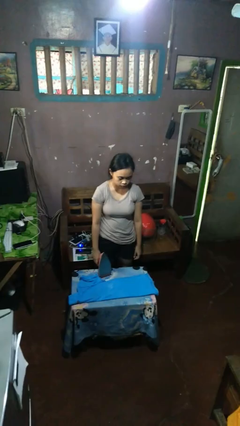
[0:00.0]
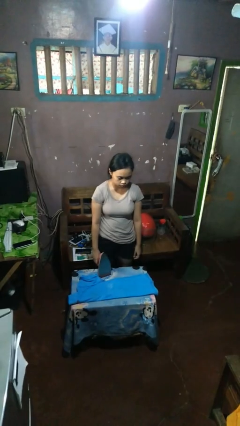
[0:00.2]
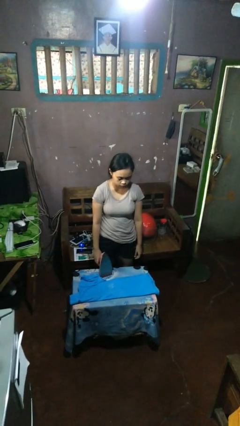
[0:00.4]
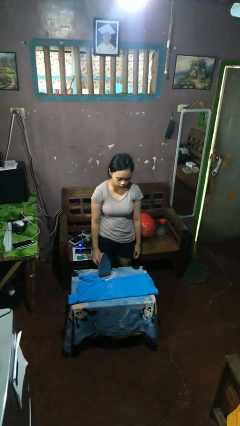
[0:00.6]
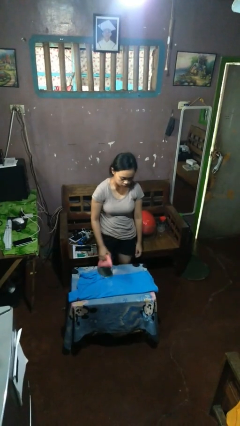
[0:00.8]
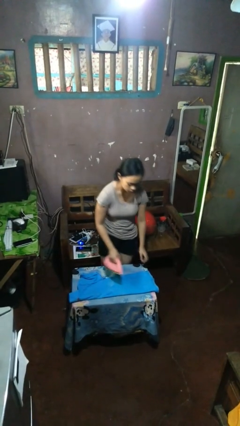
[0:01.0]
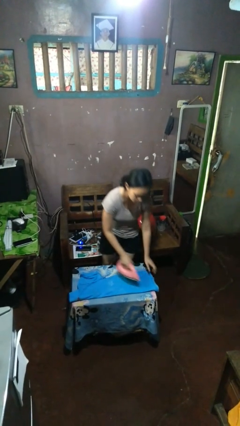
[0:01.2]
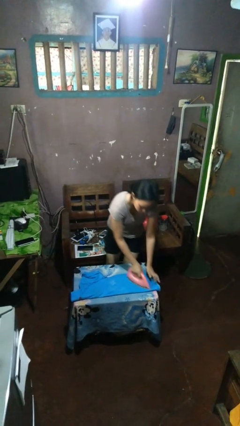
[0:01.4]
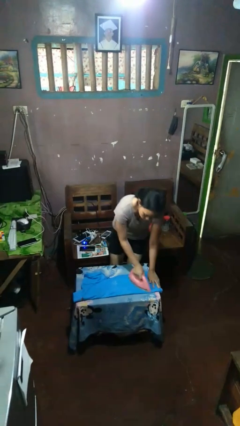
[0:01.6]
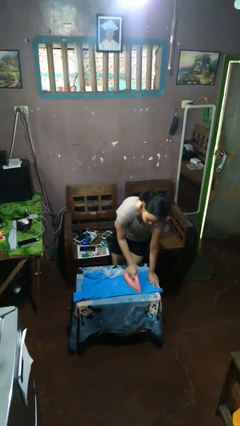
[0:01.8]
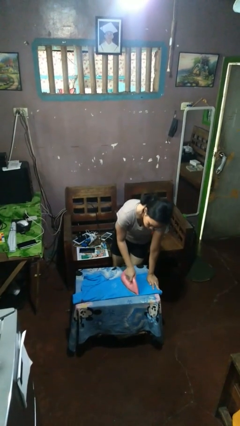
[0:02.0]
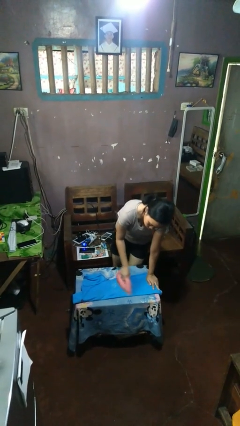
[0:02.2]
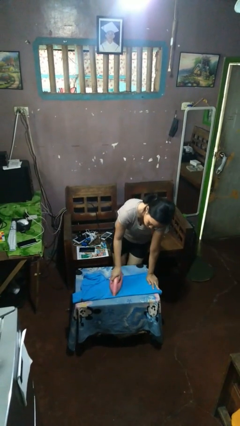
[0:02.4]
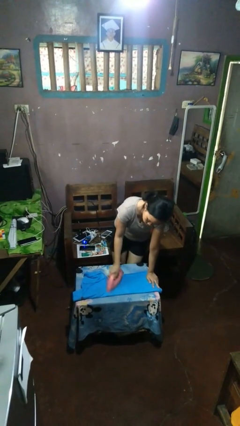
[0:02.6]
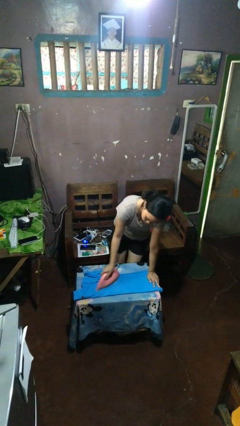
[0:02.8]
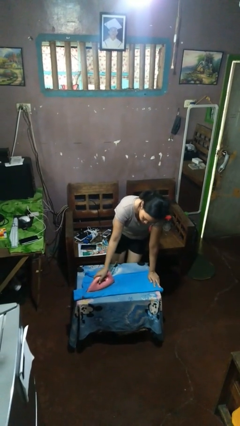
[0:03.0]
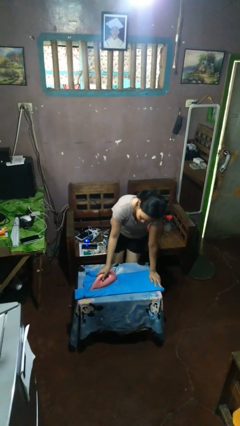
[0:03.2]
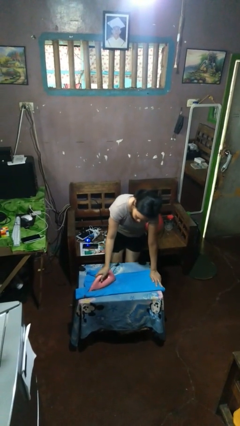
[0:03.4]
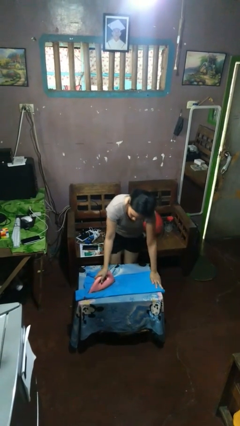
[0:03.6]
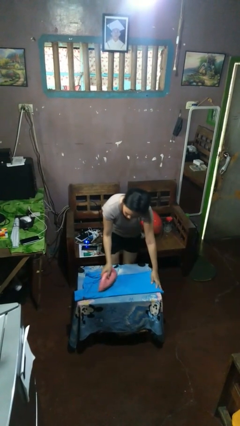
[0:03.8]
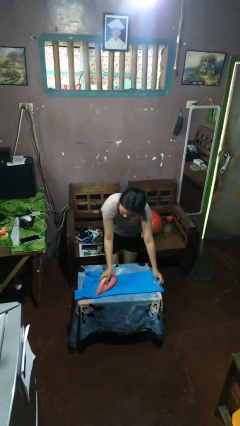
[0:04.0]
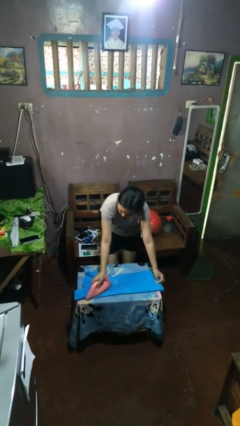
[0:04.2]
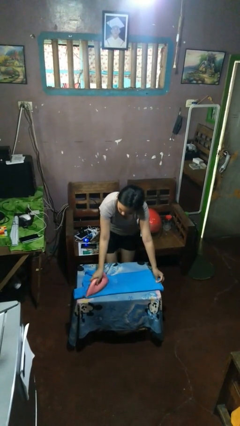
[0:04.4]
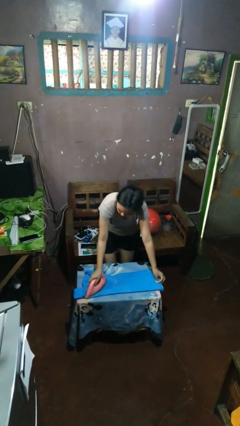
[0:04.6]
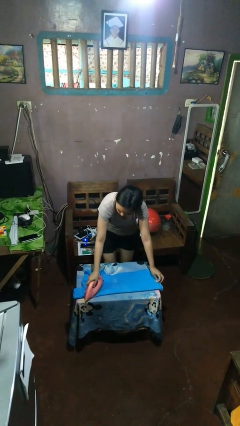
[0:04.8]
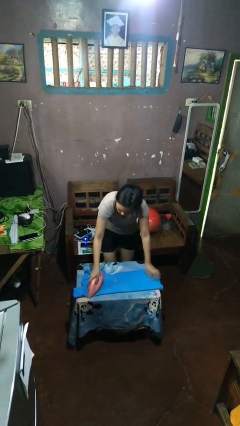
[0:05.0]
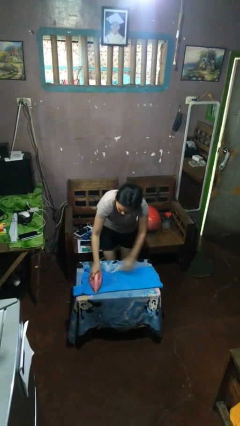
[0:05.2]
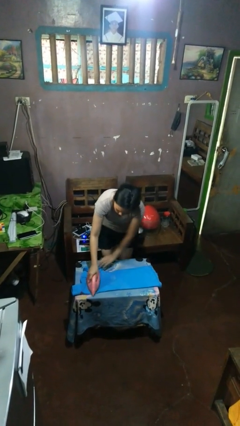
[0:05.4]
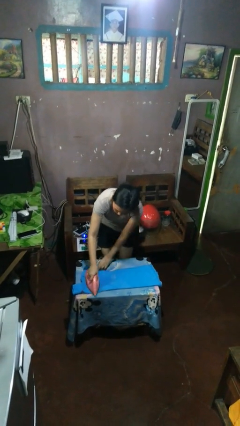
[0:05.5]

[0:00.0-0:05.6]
person irons clothes

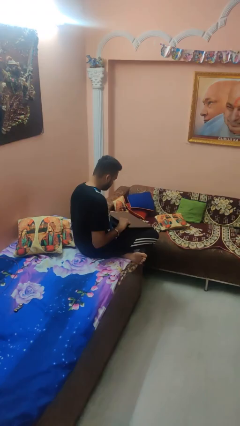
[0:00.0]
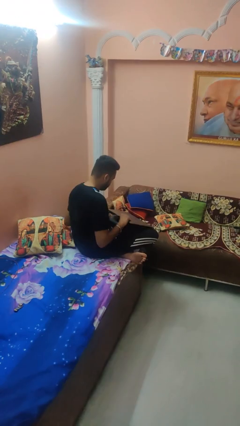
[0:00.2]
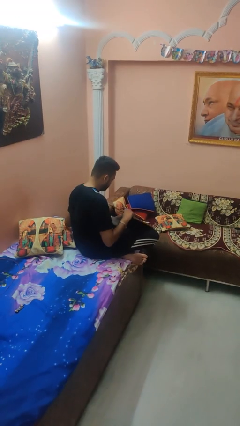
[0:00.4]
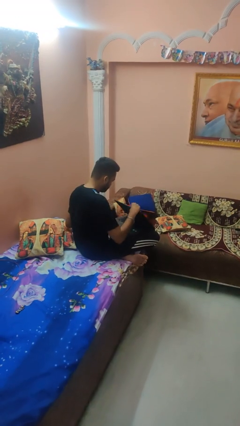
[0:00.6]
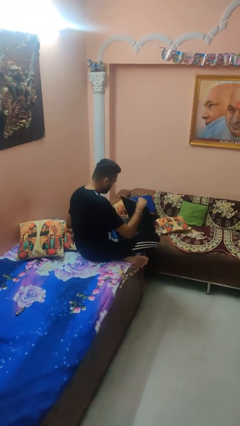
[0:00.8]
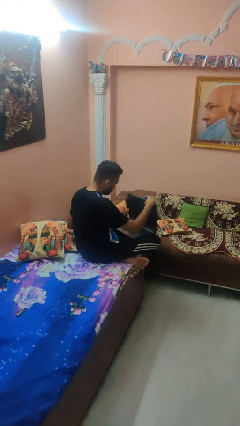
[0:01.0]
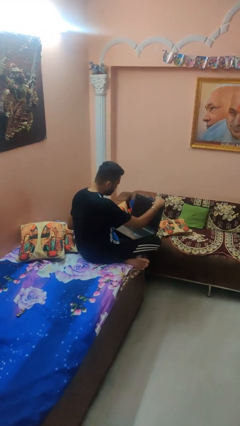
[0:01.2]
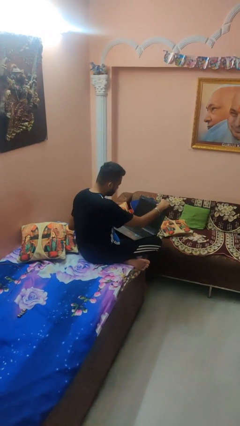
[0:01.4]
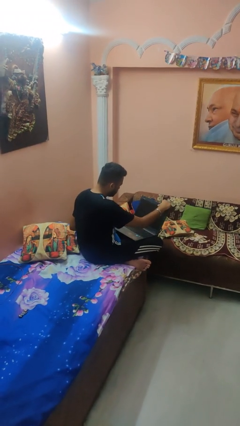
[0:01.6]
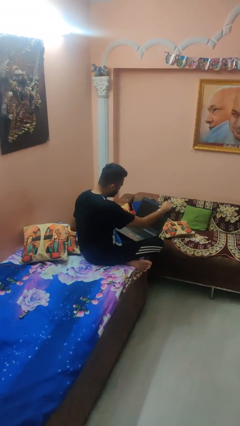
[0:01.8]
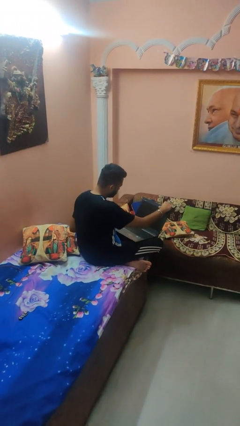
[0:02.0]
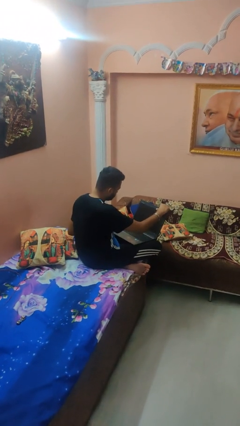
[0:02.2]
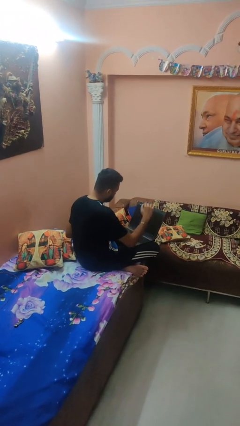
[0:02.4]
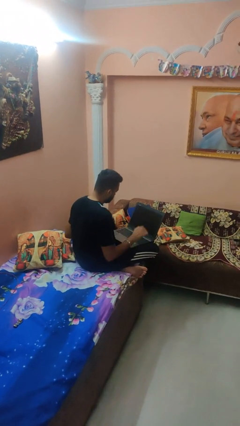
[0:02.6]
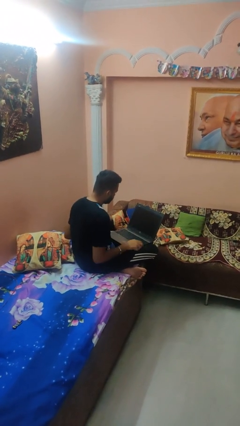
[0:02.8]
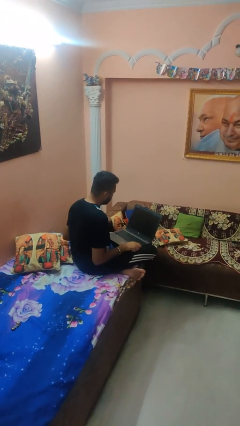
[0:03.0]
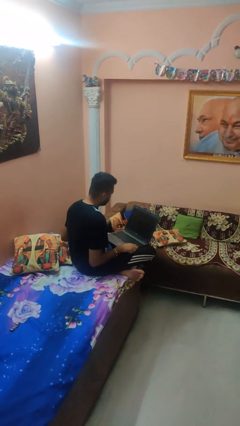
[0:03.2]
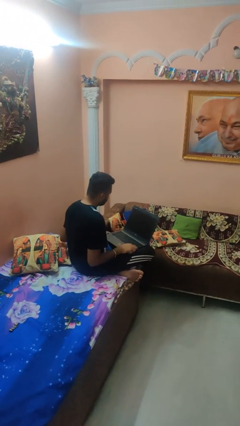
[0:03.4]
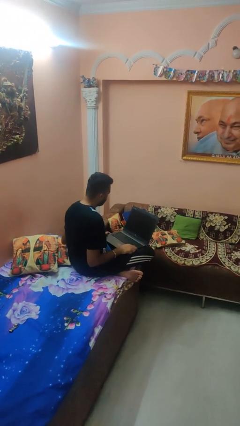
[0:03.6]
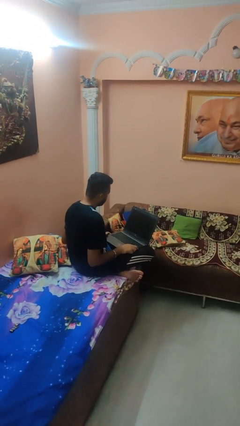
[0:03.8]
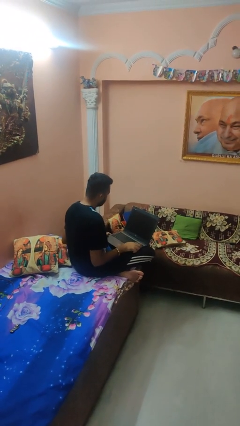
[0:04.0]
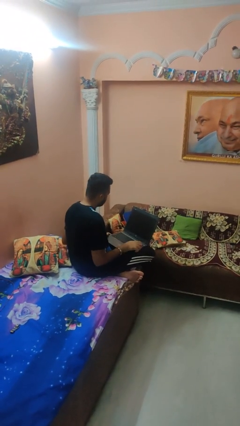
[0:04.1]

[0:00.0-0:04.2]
person opens laptop

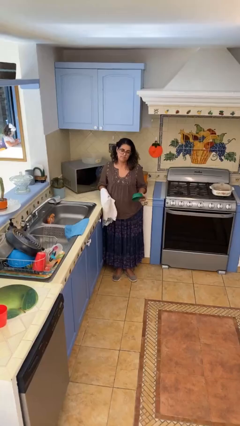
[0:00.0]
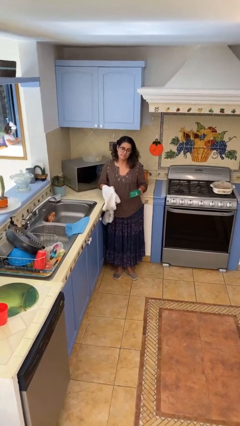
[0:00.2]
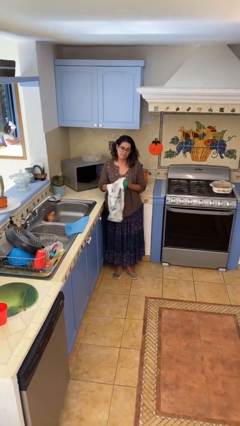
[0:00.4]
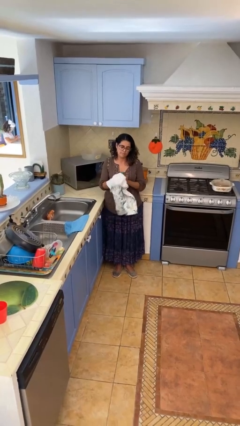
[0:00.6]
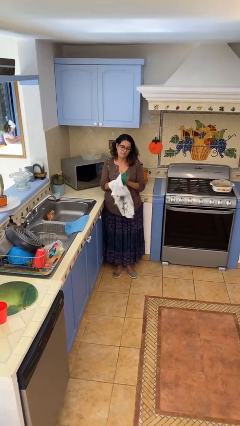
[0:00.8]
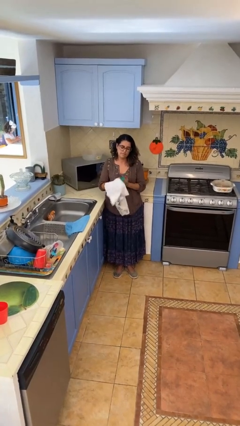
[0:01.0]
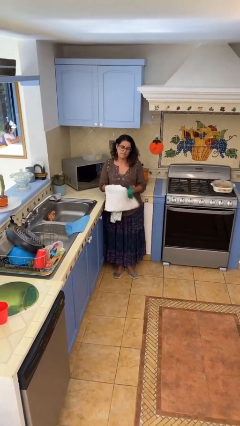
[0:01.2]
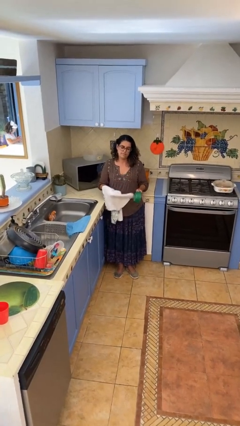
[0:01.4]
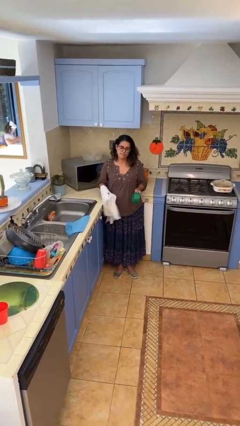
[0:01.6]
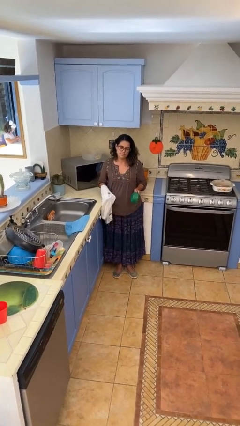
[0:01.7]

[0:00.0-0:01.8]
person dries dish

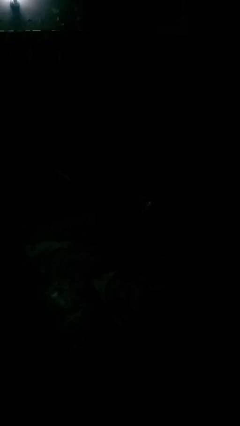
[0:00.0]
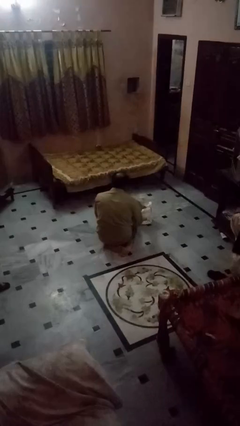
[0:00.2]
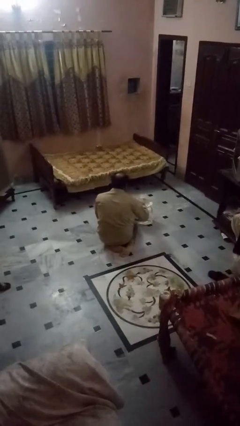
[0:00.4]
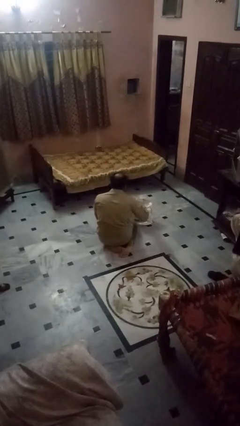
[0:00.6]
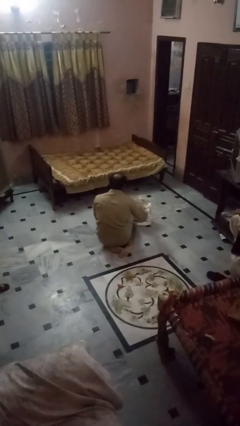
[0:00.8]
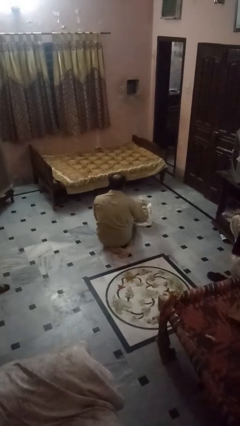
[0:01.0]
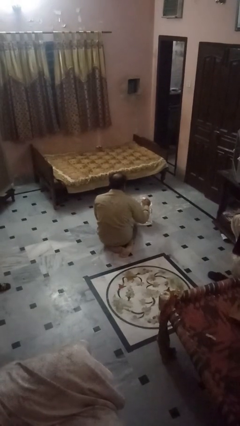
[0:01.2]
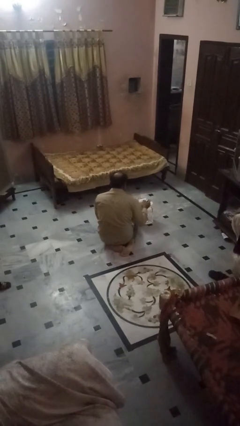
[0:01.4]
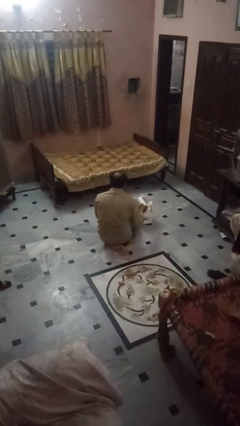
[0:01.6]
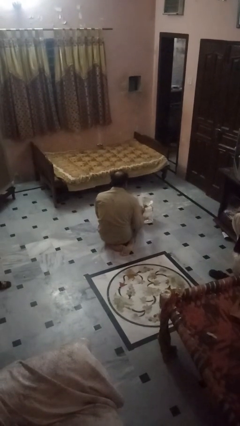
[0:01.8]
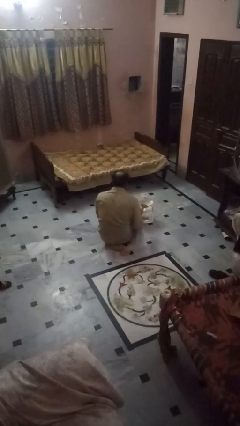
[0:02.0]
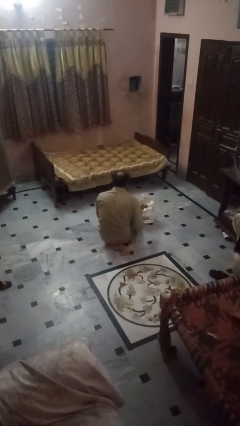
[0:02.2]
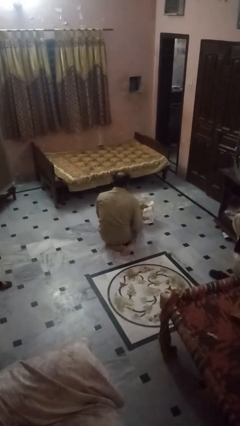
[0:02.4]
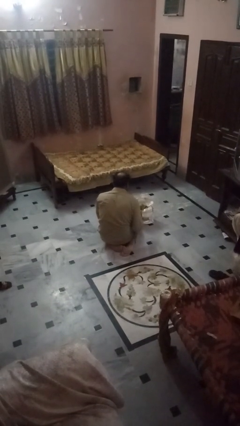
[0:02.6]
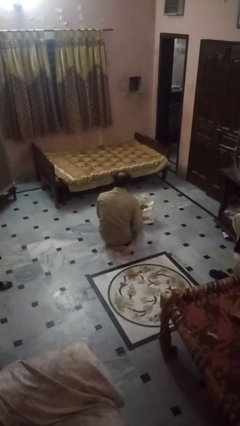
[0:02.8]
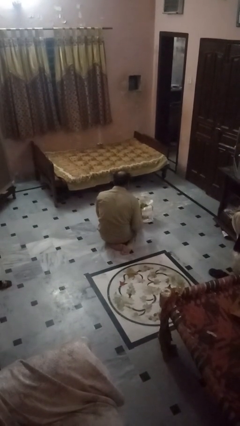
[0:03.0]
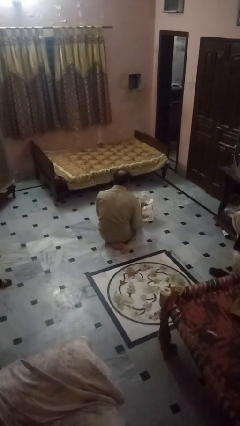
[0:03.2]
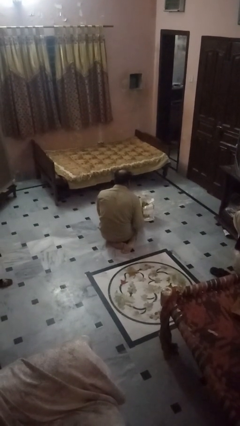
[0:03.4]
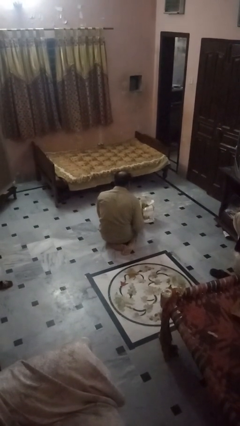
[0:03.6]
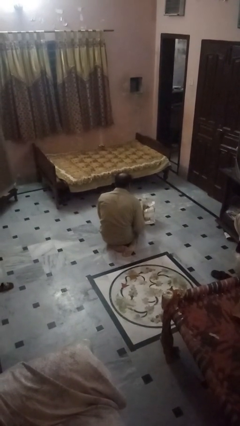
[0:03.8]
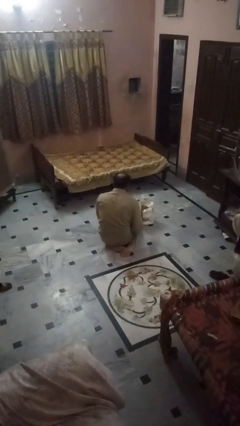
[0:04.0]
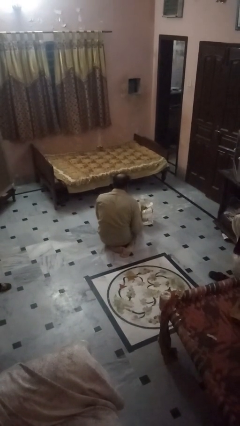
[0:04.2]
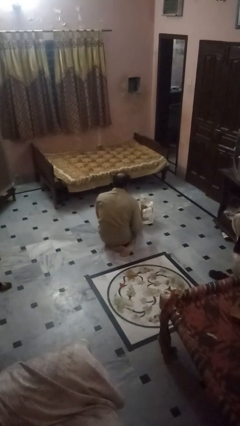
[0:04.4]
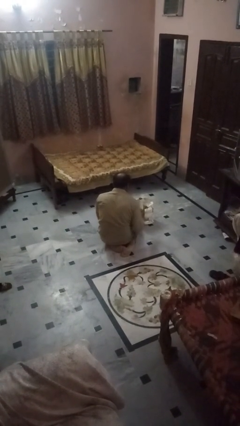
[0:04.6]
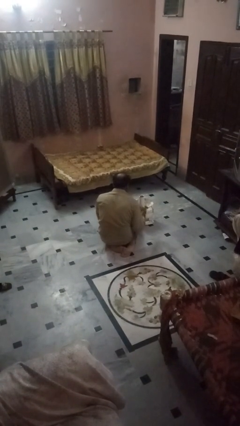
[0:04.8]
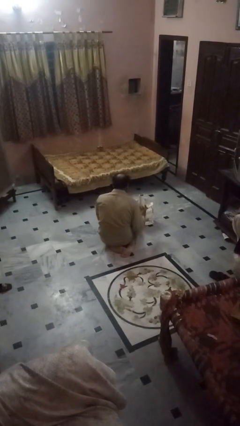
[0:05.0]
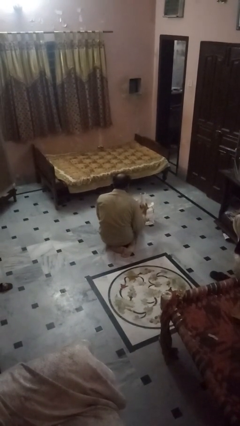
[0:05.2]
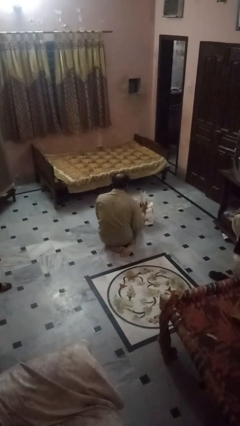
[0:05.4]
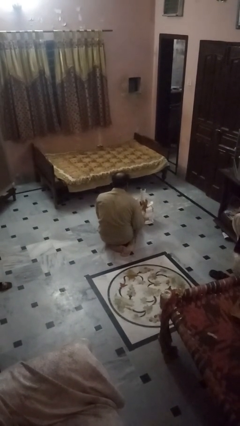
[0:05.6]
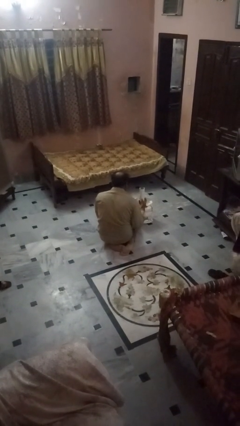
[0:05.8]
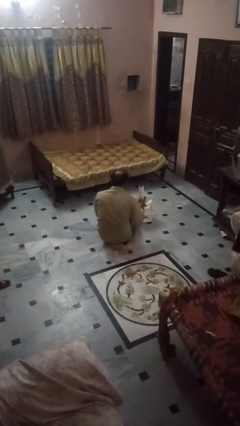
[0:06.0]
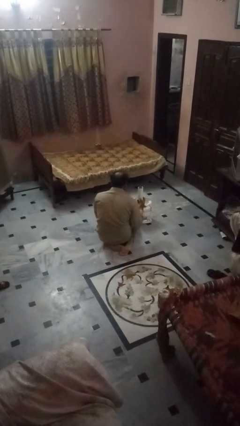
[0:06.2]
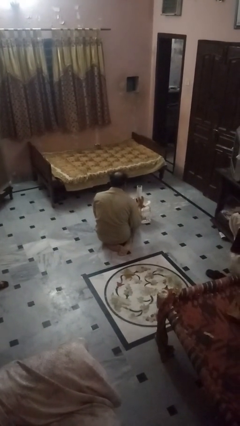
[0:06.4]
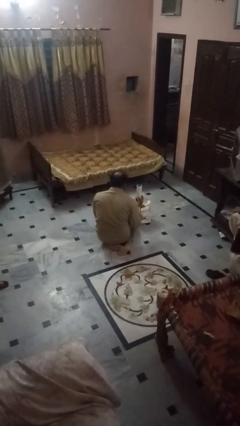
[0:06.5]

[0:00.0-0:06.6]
person takes object from bag
